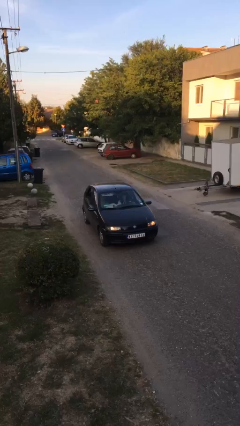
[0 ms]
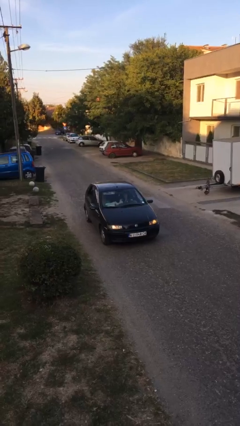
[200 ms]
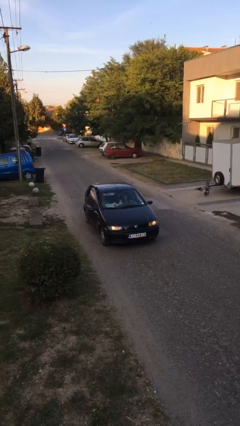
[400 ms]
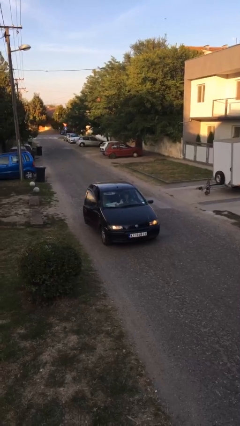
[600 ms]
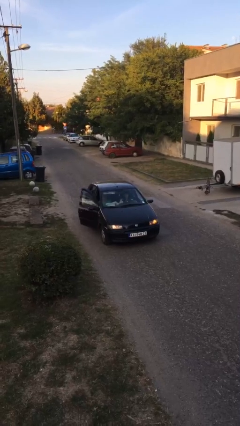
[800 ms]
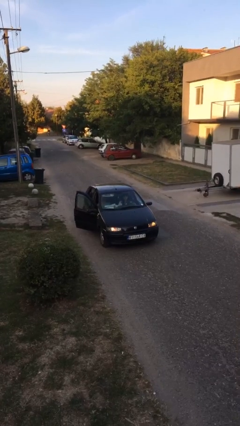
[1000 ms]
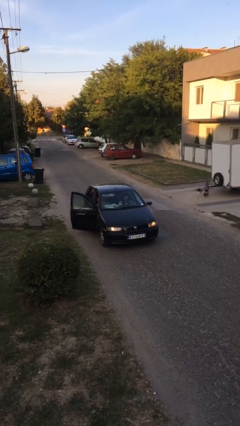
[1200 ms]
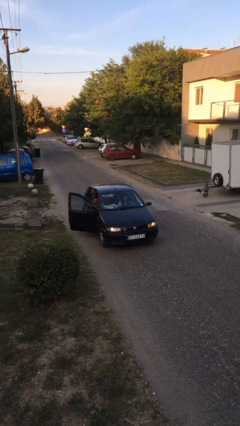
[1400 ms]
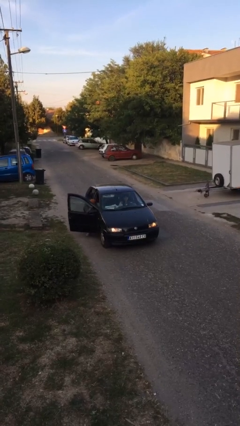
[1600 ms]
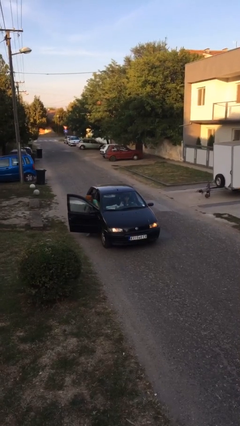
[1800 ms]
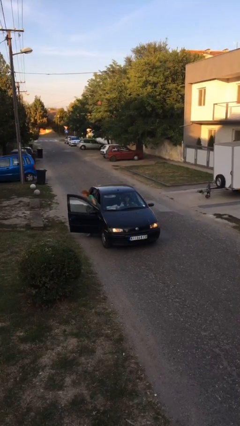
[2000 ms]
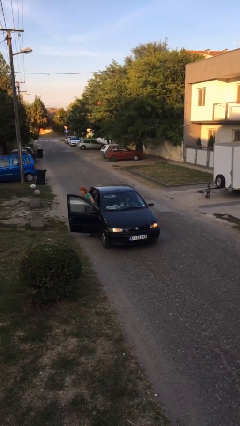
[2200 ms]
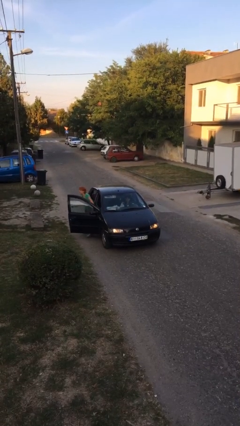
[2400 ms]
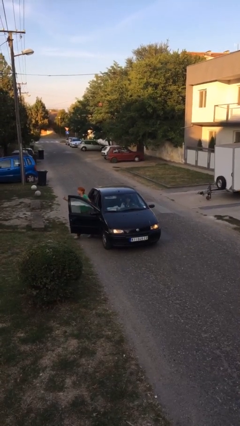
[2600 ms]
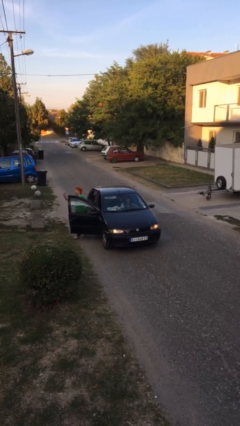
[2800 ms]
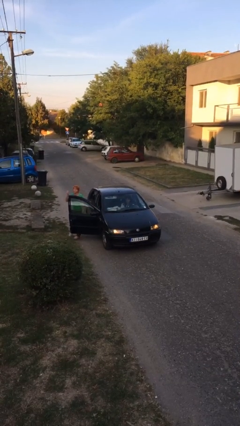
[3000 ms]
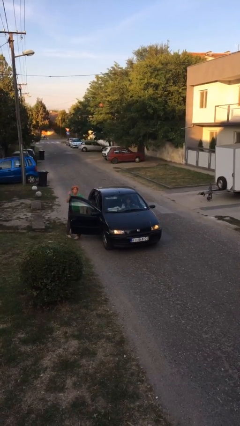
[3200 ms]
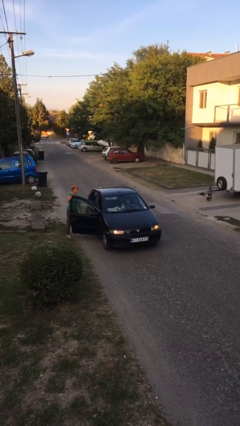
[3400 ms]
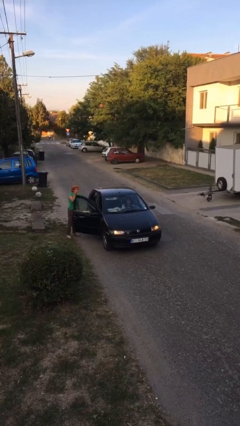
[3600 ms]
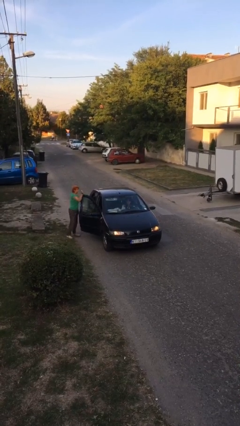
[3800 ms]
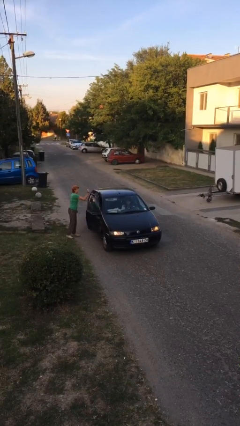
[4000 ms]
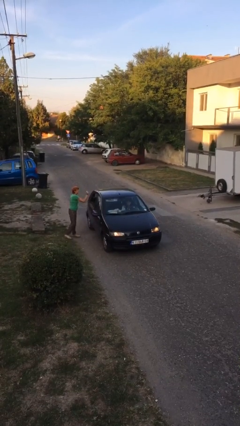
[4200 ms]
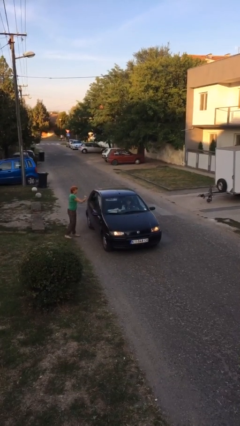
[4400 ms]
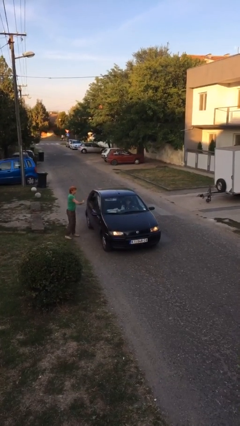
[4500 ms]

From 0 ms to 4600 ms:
car drops off person

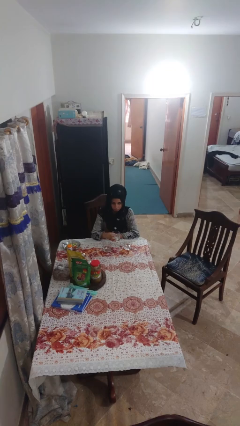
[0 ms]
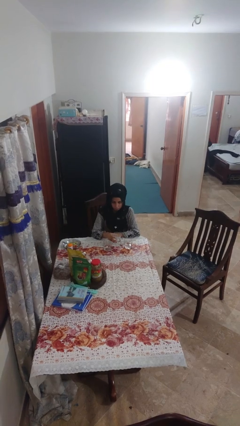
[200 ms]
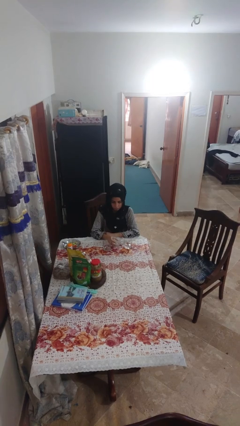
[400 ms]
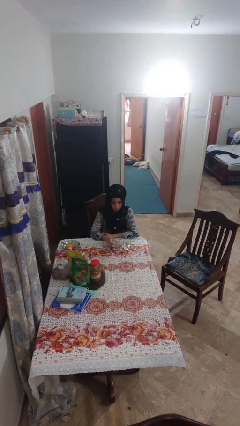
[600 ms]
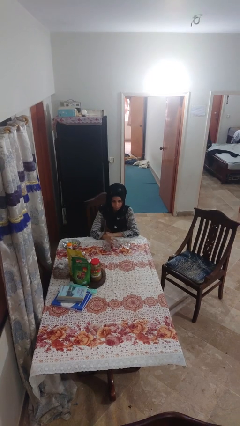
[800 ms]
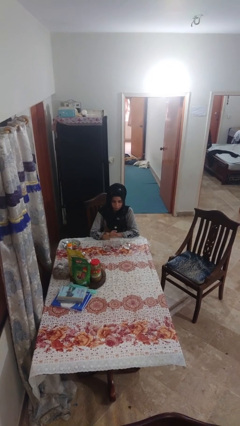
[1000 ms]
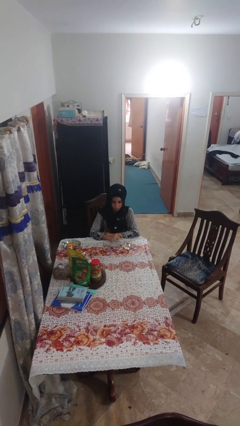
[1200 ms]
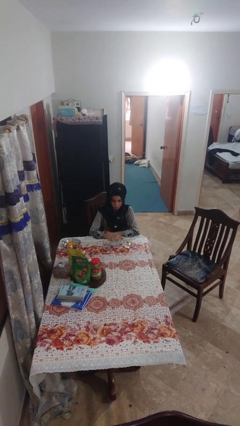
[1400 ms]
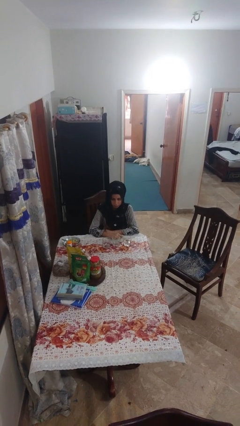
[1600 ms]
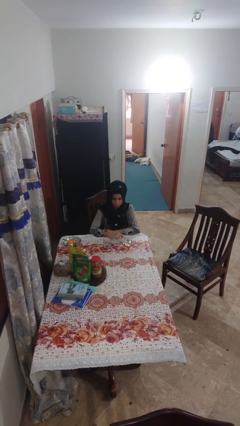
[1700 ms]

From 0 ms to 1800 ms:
person puts down object on table

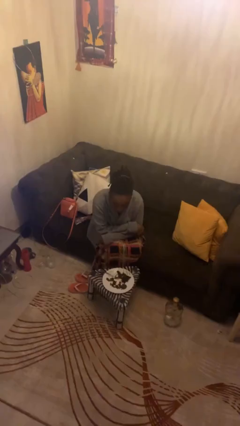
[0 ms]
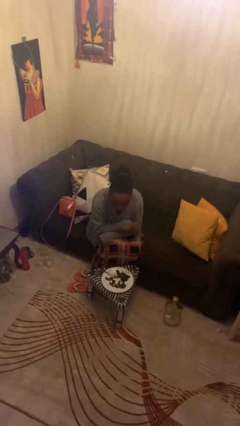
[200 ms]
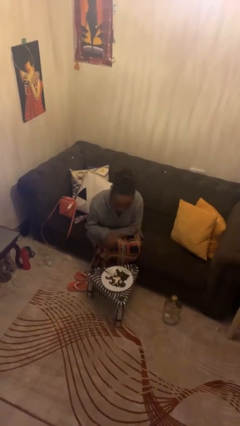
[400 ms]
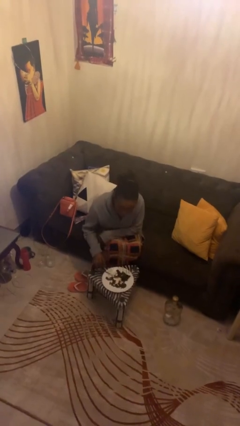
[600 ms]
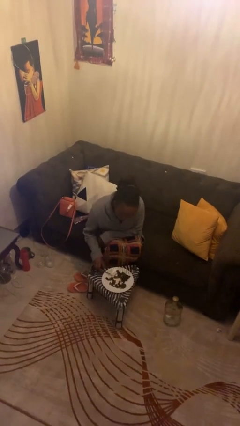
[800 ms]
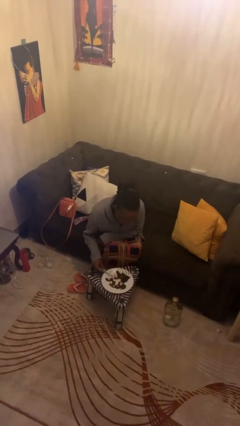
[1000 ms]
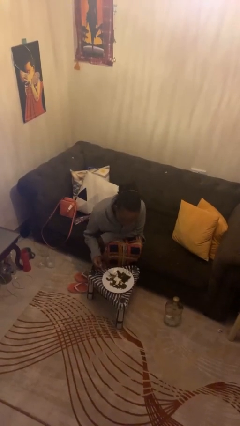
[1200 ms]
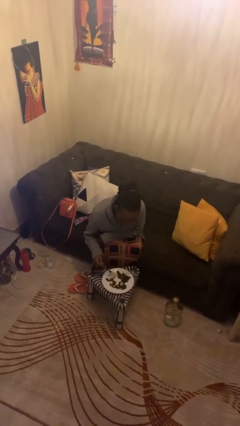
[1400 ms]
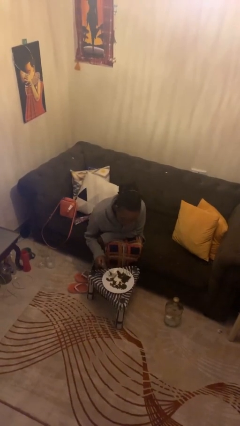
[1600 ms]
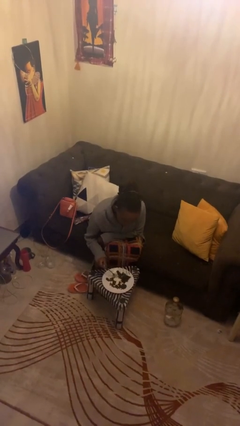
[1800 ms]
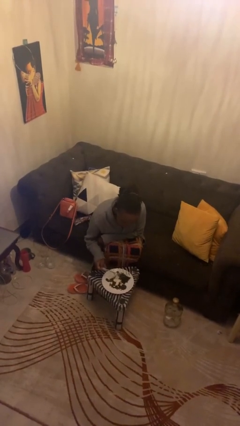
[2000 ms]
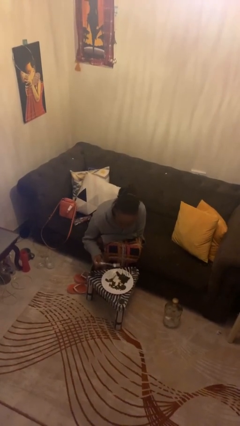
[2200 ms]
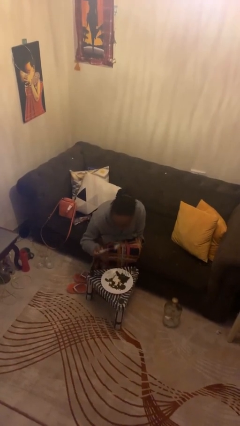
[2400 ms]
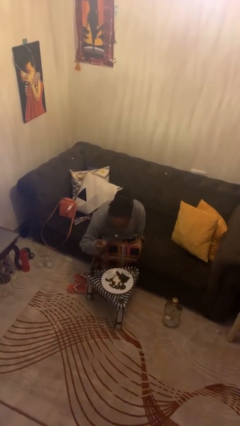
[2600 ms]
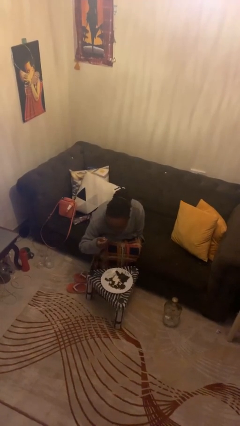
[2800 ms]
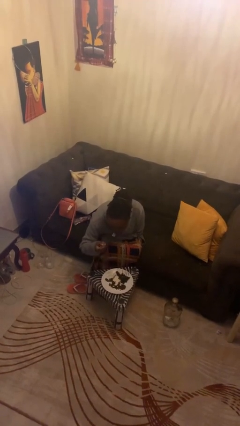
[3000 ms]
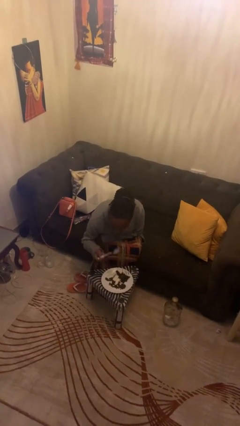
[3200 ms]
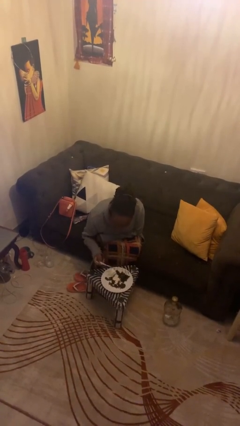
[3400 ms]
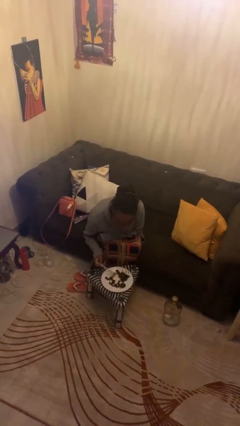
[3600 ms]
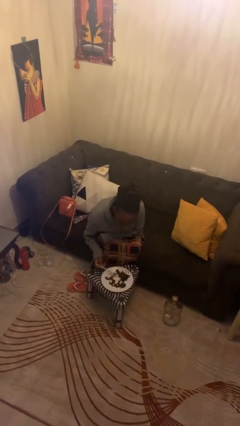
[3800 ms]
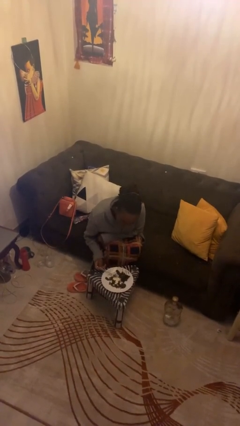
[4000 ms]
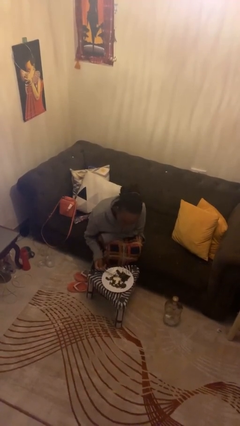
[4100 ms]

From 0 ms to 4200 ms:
person eats with utensil

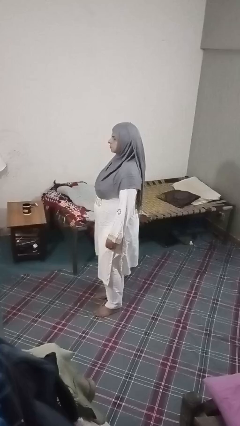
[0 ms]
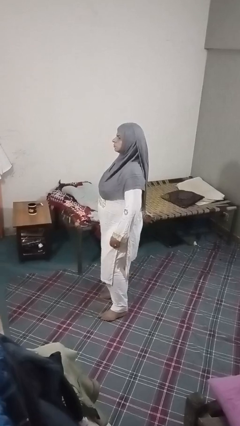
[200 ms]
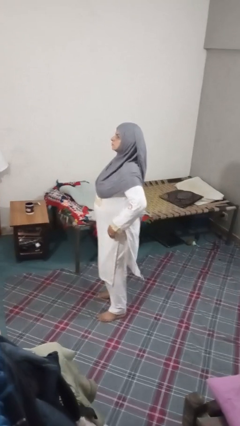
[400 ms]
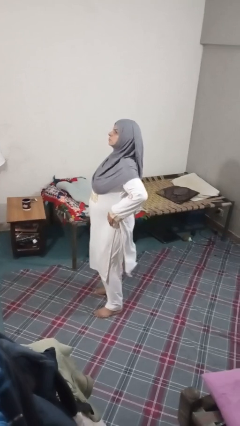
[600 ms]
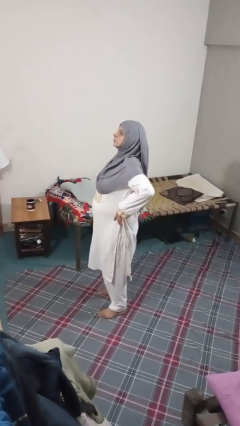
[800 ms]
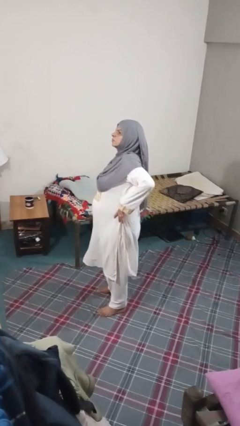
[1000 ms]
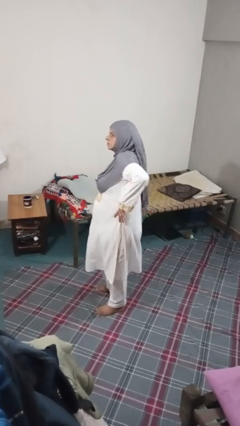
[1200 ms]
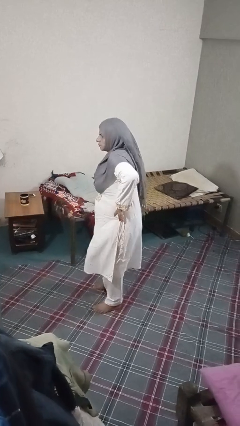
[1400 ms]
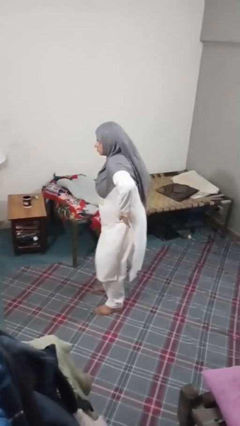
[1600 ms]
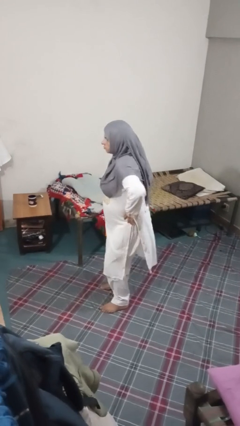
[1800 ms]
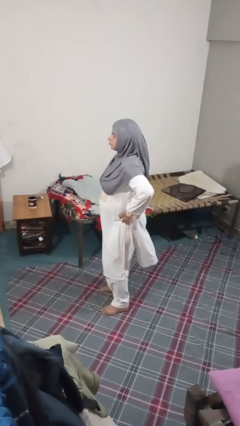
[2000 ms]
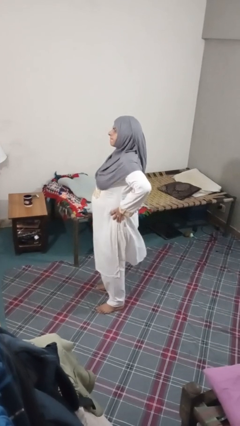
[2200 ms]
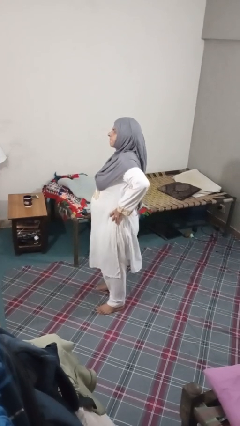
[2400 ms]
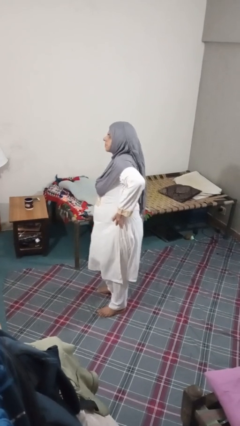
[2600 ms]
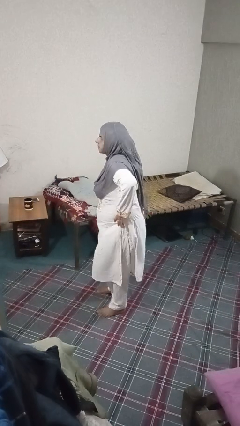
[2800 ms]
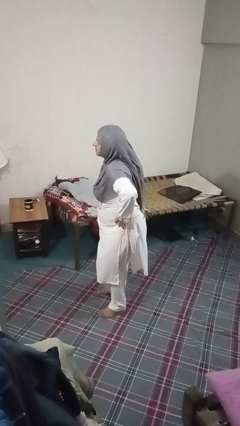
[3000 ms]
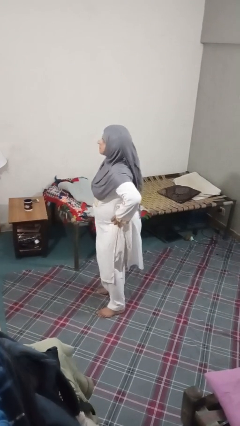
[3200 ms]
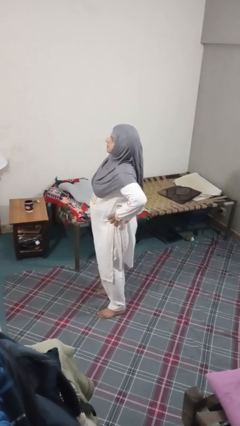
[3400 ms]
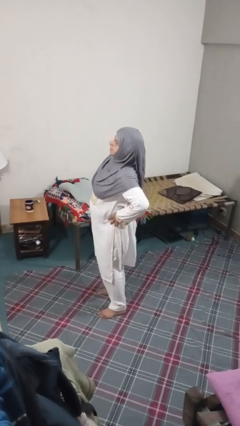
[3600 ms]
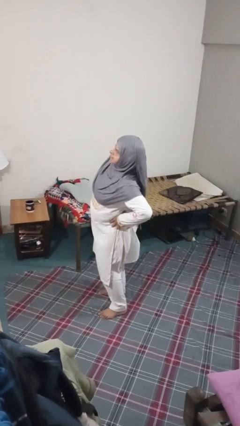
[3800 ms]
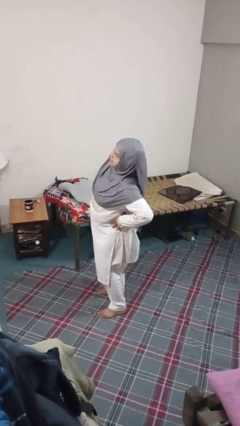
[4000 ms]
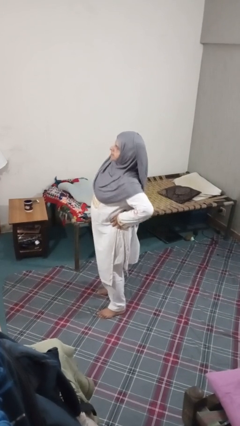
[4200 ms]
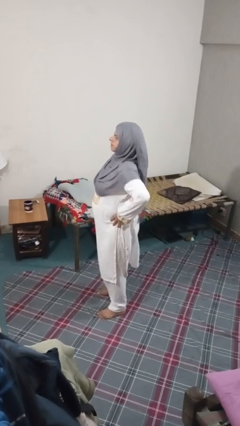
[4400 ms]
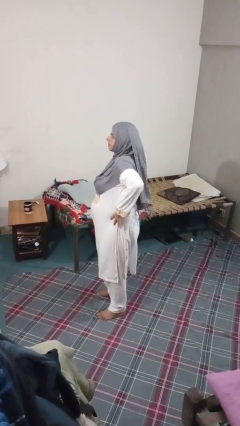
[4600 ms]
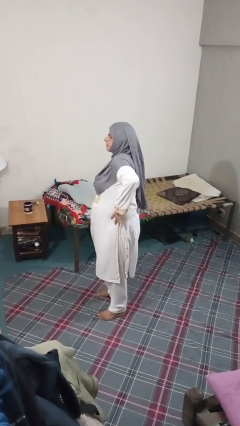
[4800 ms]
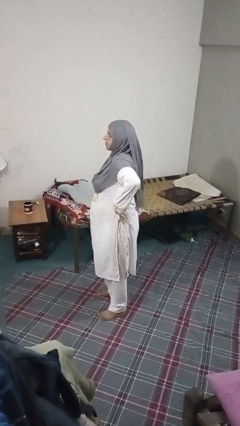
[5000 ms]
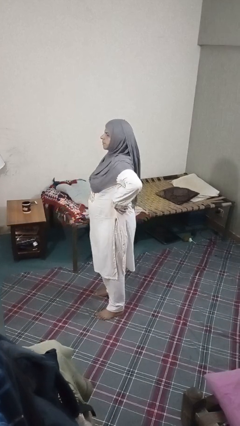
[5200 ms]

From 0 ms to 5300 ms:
person wiggles hips

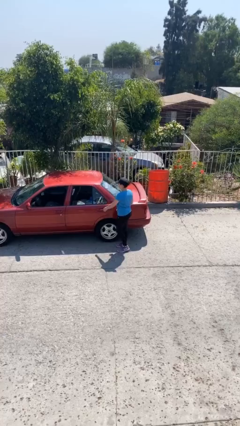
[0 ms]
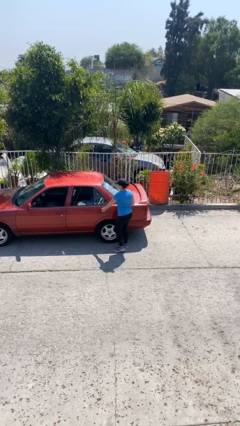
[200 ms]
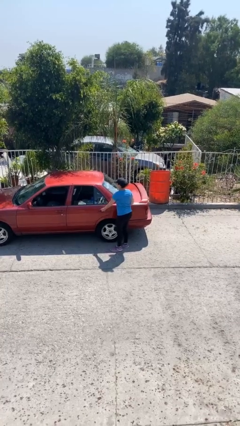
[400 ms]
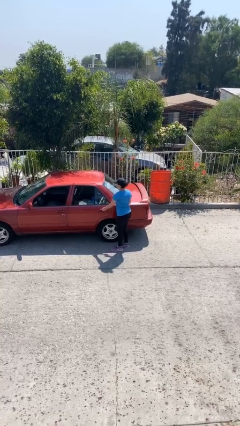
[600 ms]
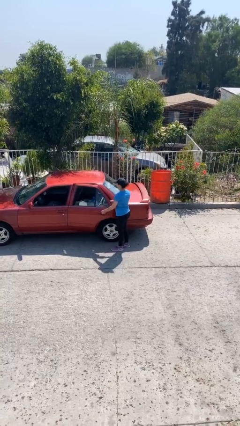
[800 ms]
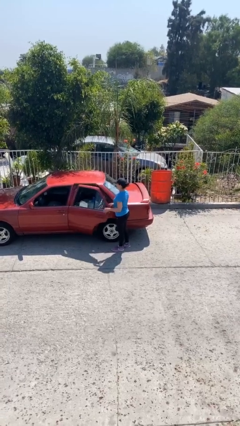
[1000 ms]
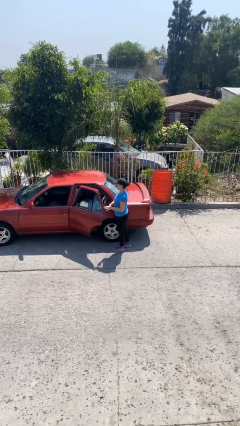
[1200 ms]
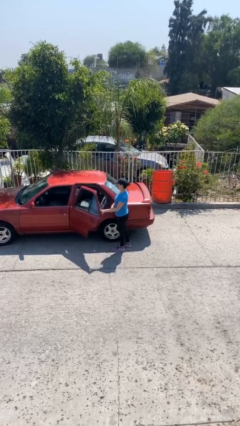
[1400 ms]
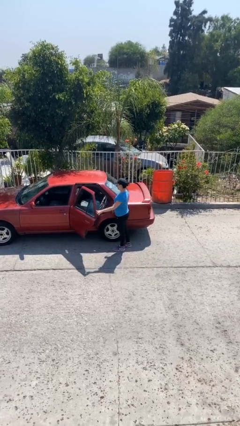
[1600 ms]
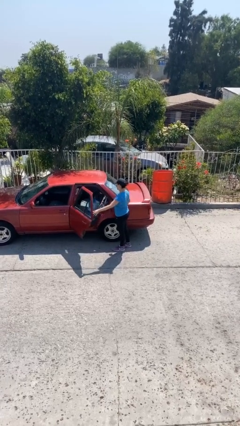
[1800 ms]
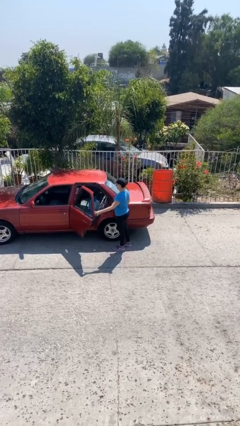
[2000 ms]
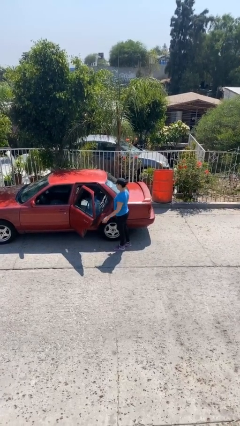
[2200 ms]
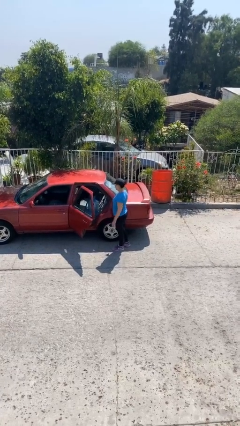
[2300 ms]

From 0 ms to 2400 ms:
person opens car door
